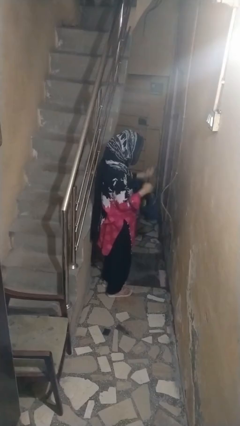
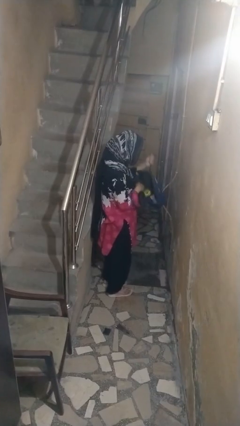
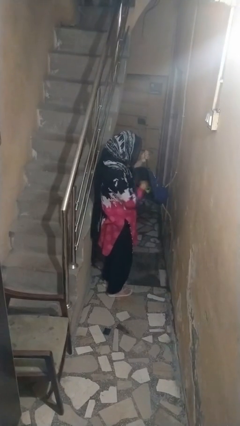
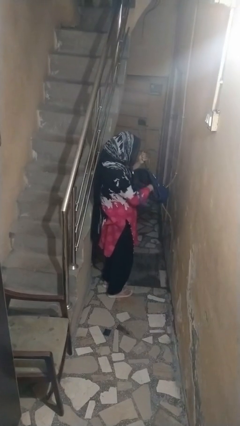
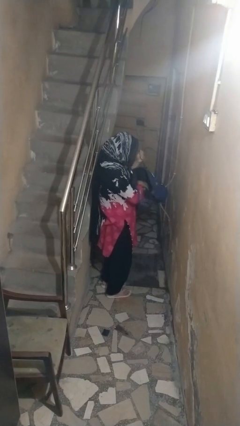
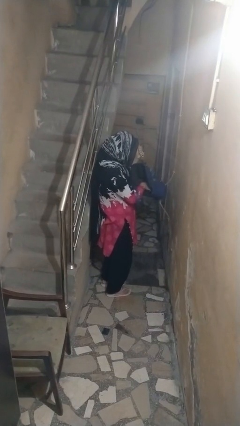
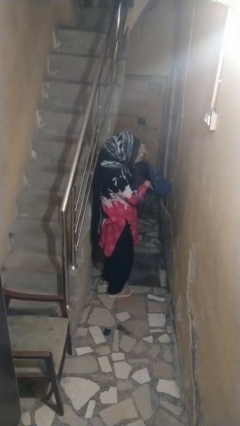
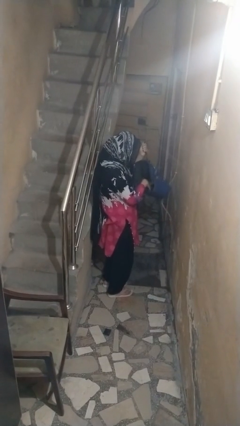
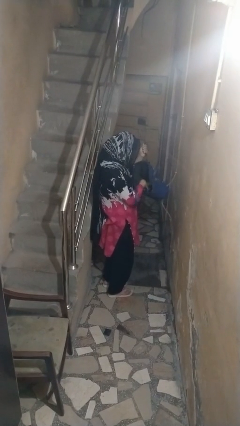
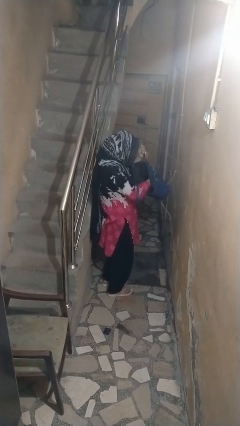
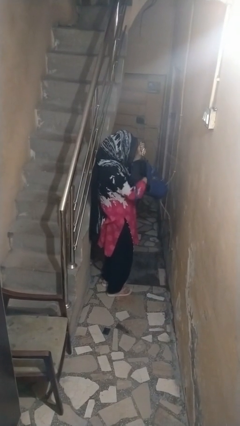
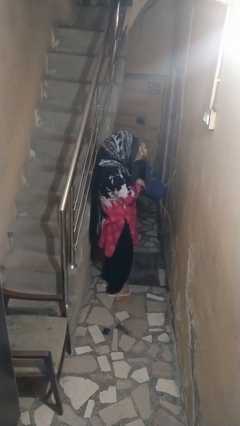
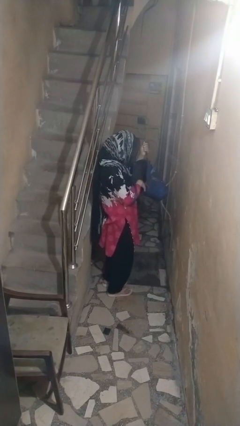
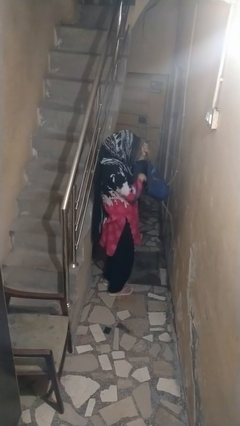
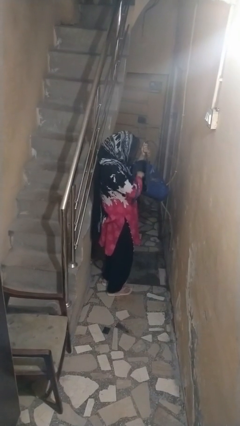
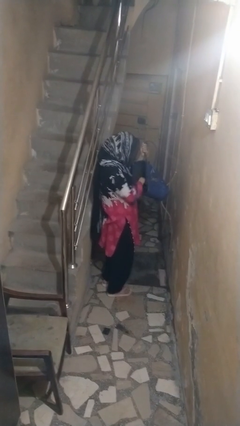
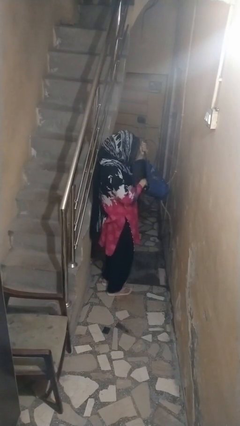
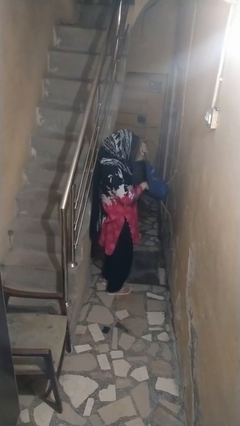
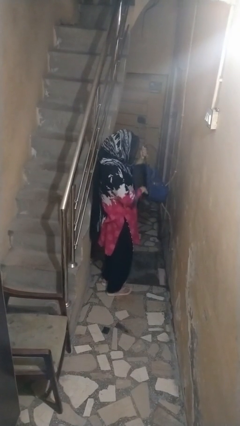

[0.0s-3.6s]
person searches in purse

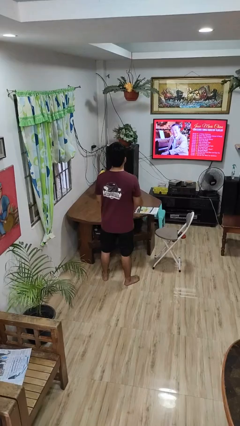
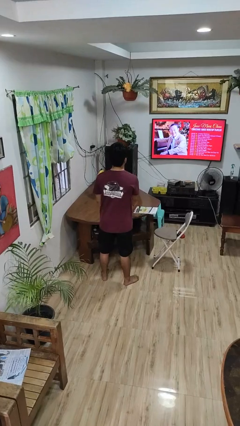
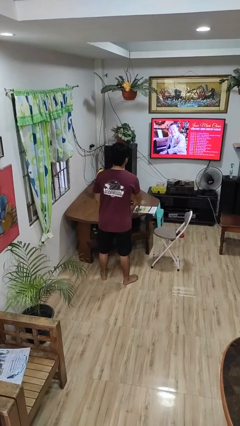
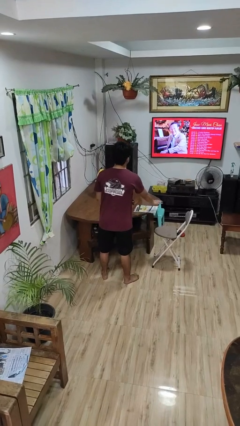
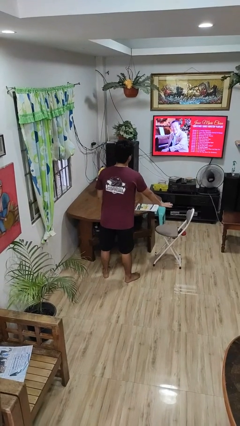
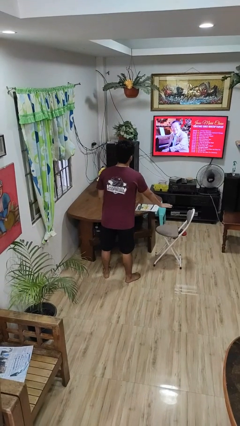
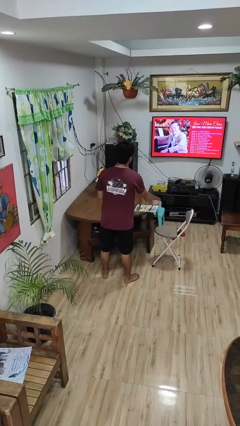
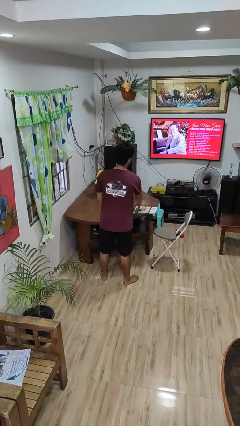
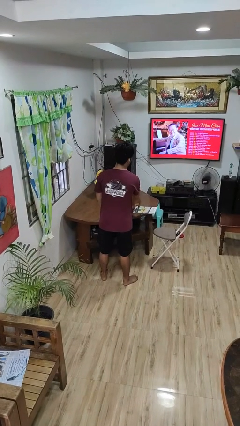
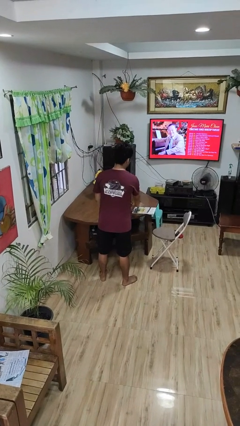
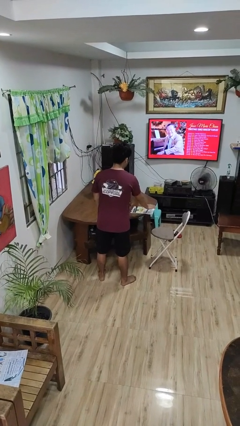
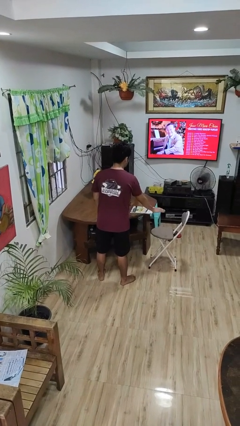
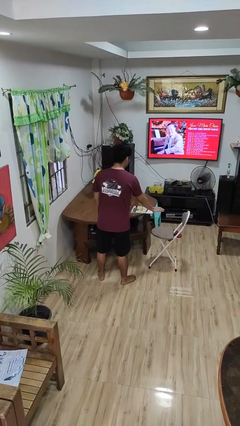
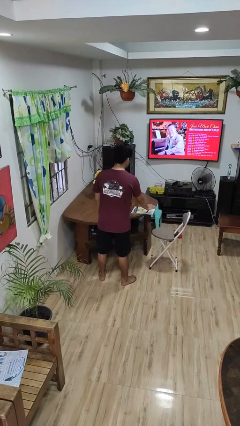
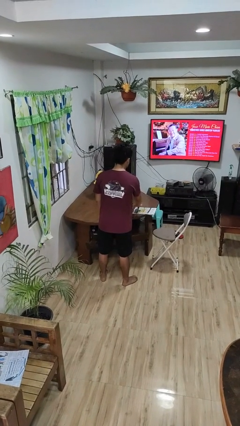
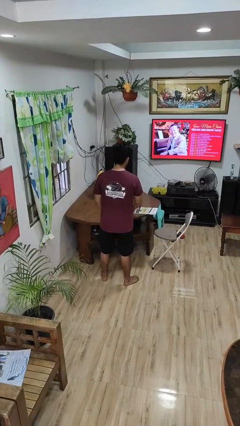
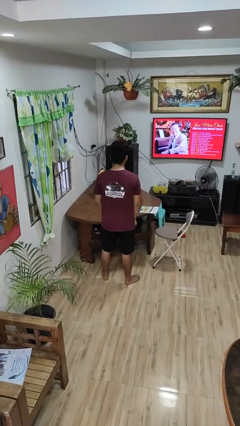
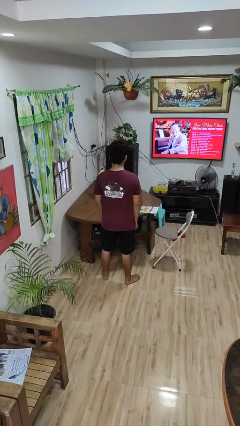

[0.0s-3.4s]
person waves hand over object

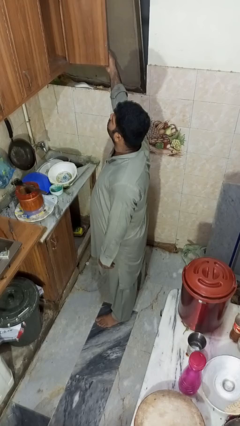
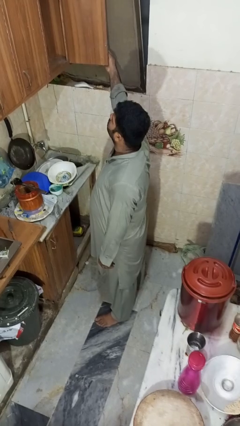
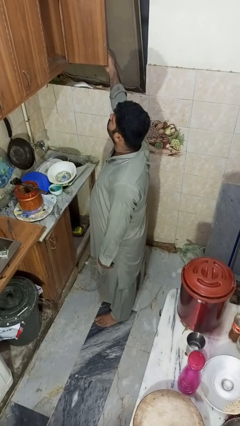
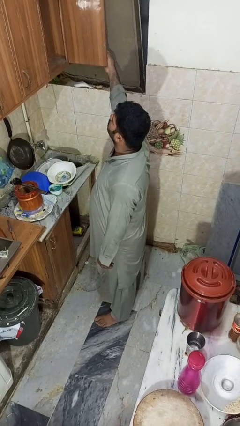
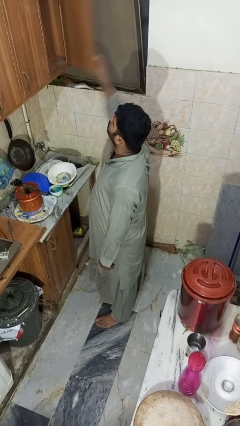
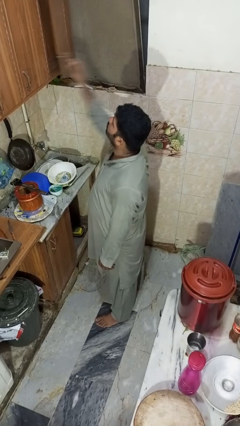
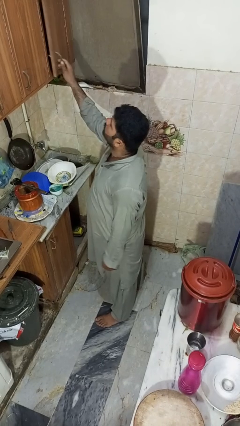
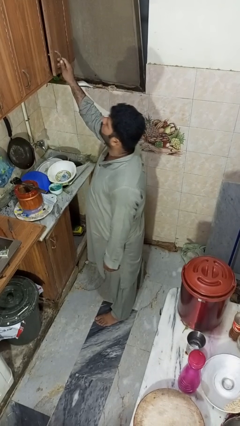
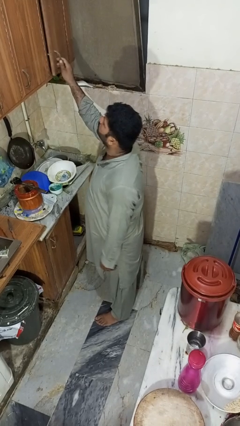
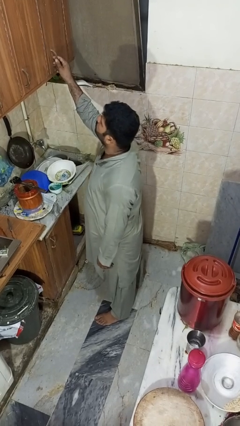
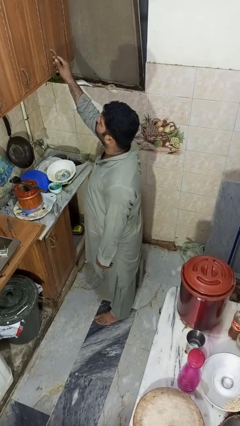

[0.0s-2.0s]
person closes cabinet

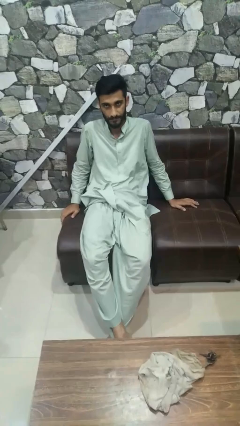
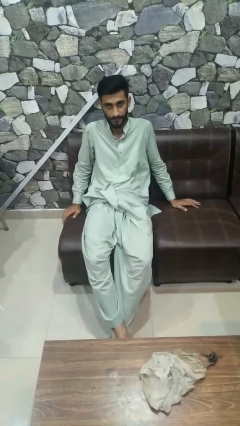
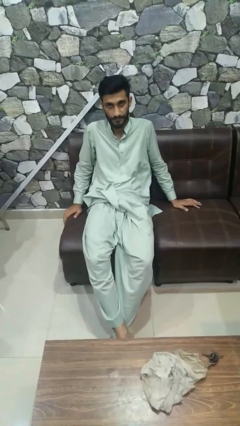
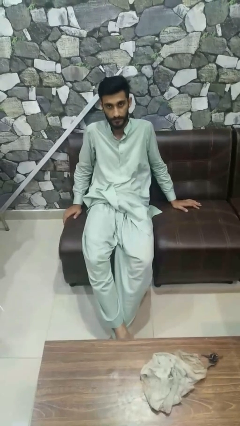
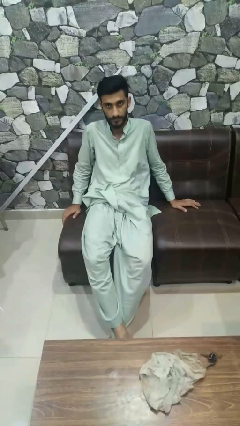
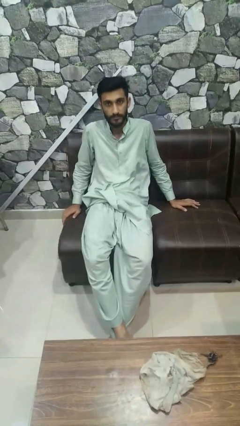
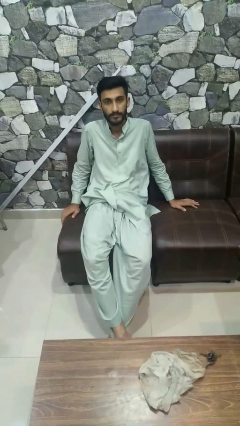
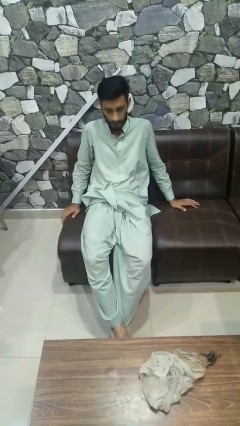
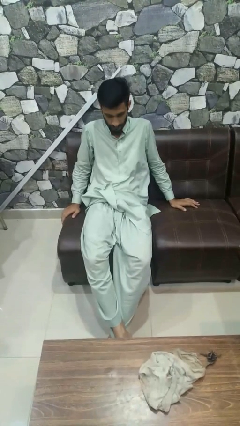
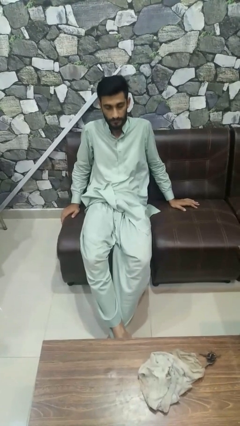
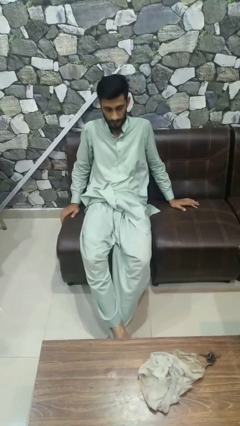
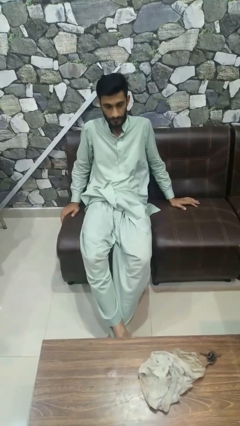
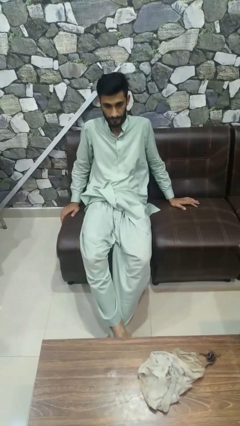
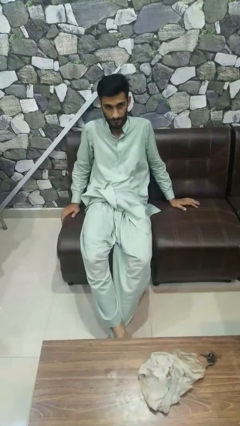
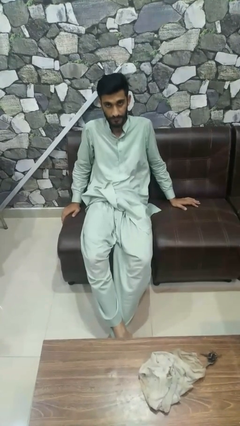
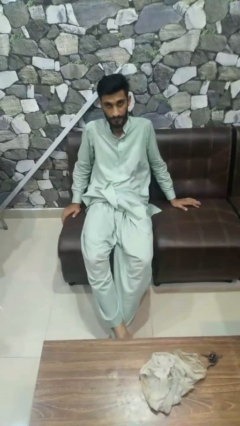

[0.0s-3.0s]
person nods head

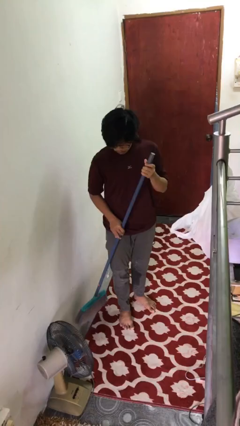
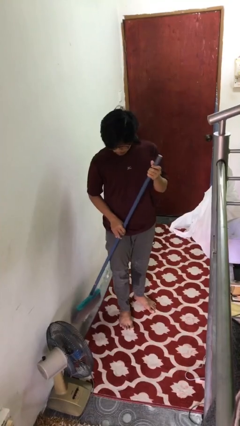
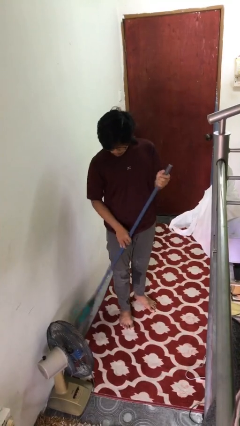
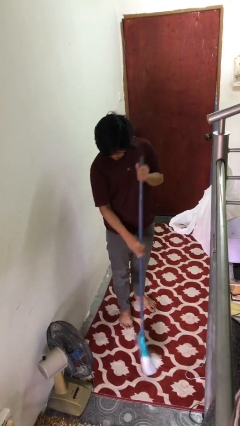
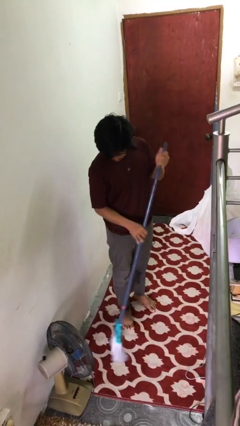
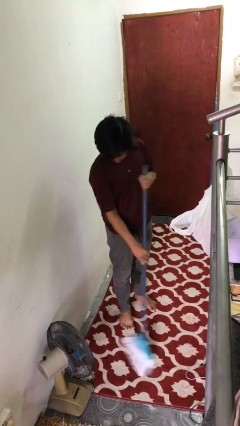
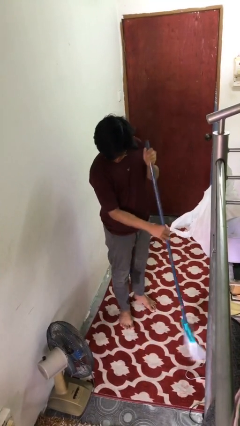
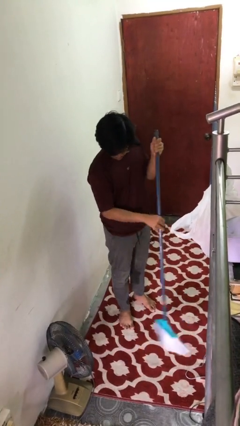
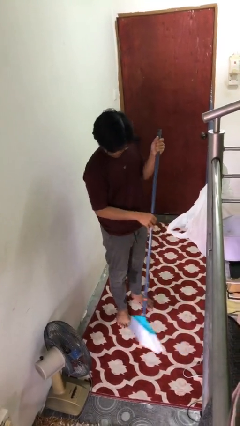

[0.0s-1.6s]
person sweeps floor

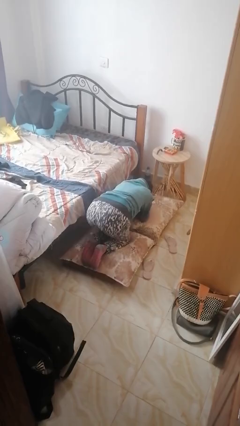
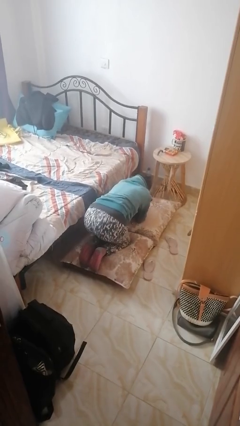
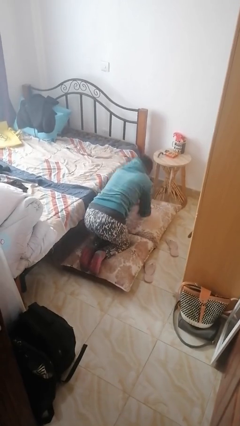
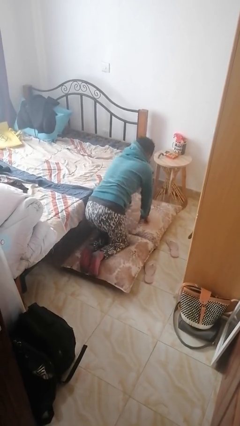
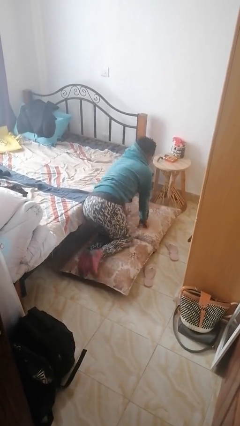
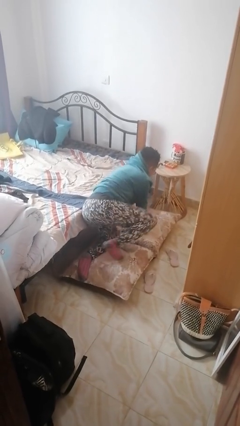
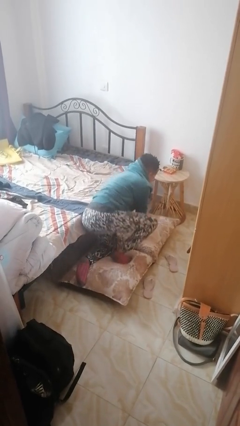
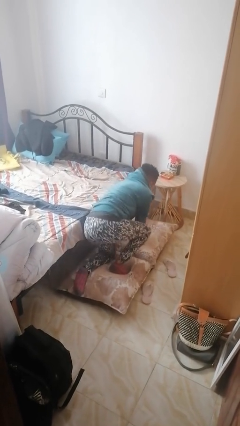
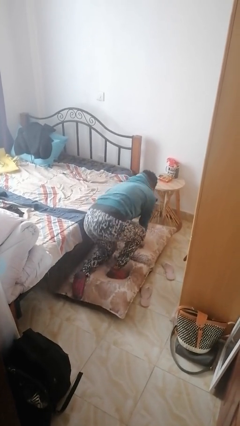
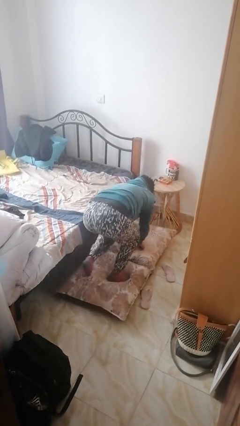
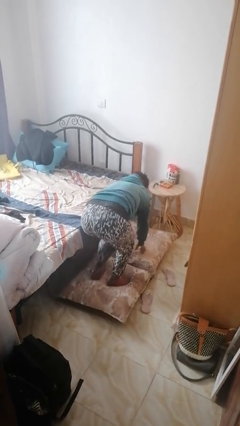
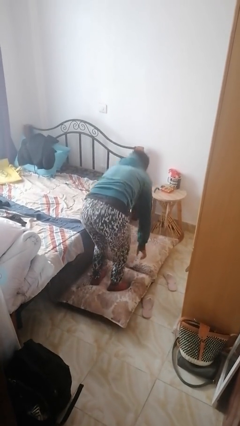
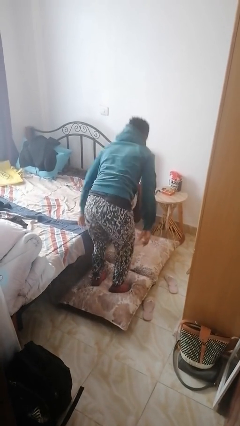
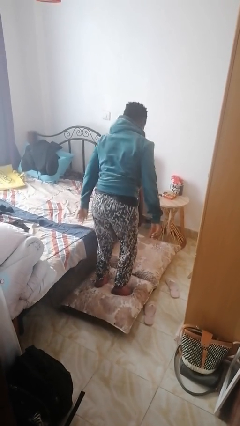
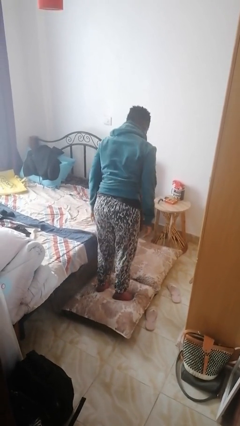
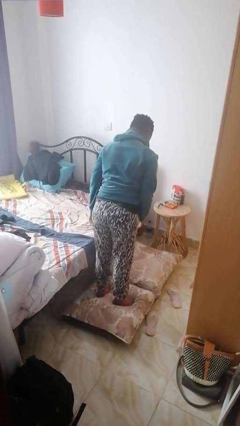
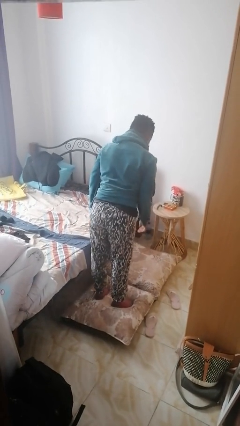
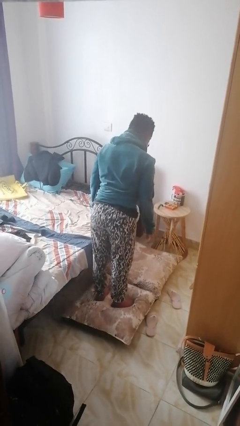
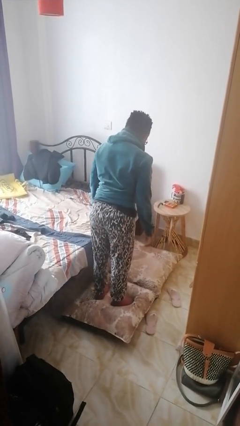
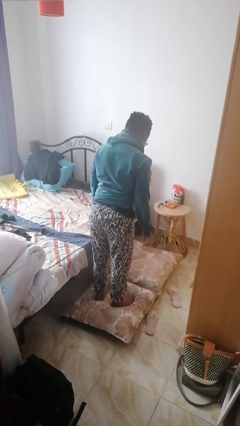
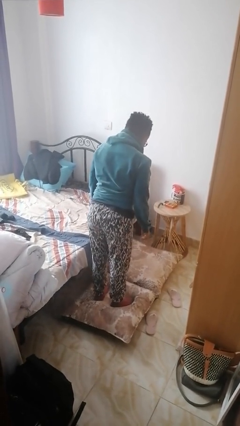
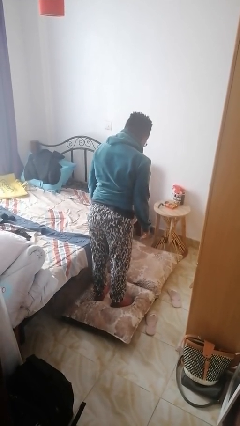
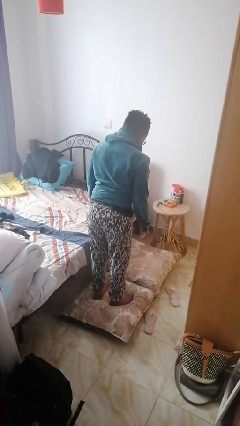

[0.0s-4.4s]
person stands up from floor
